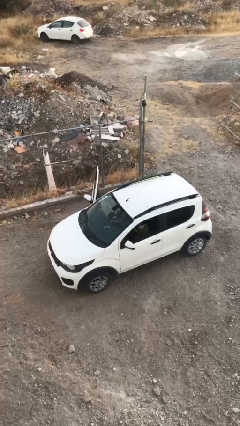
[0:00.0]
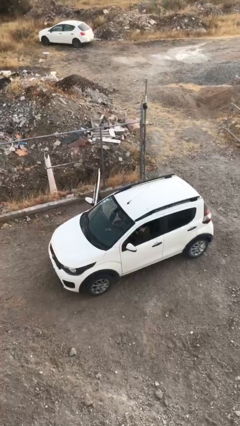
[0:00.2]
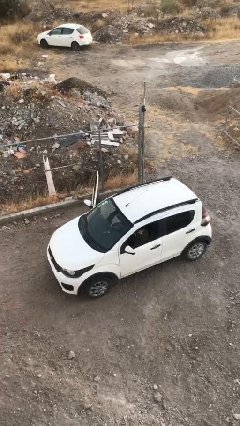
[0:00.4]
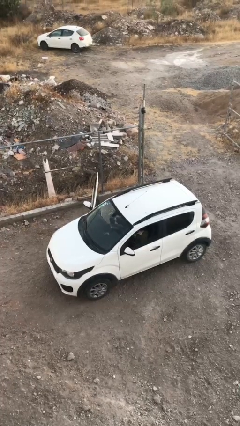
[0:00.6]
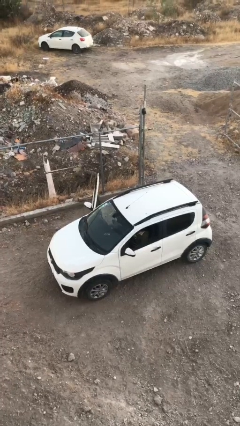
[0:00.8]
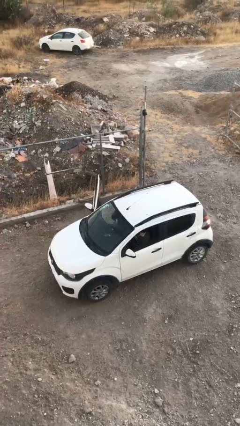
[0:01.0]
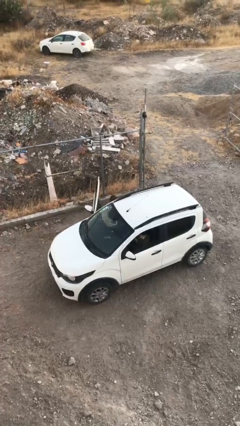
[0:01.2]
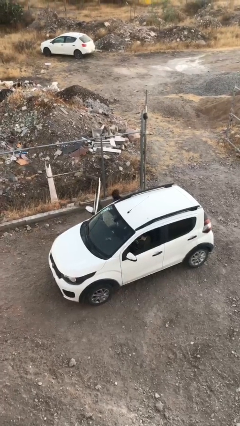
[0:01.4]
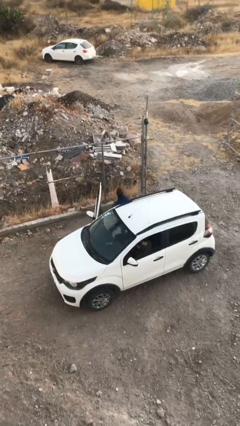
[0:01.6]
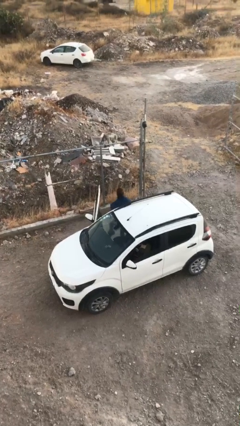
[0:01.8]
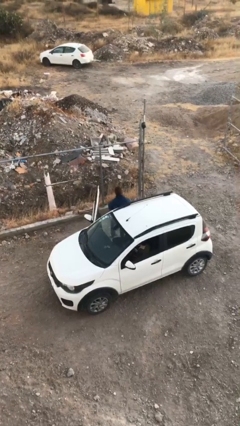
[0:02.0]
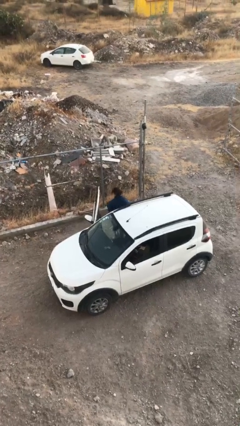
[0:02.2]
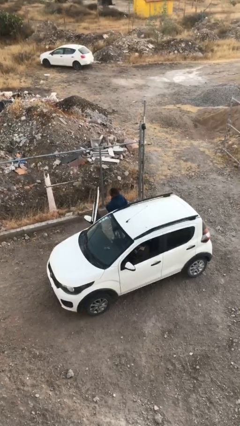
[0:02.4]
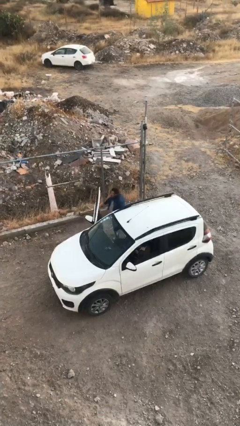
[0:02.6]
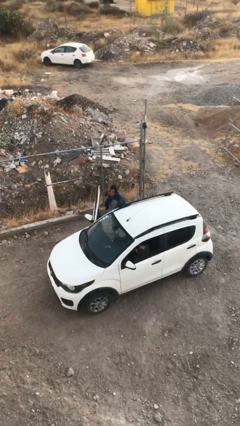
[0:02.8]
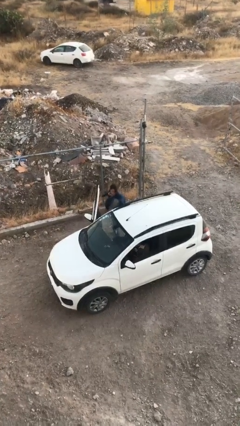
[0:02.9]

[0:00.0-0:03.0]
person exits car

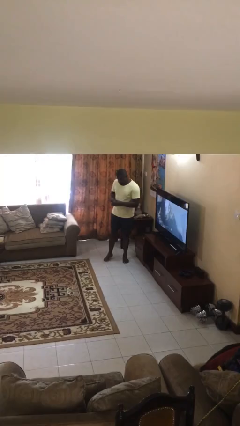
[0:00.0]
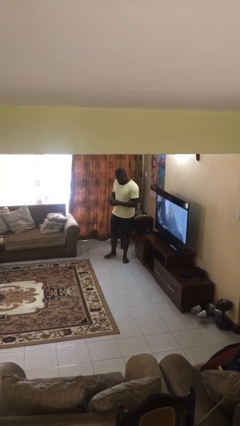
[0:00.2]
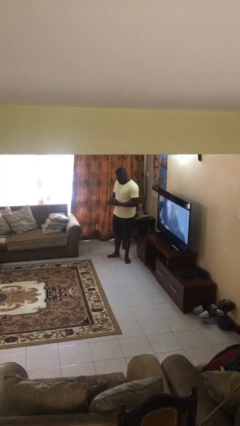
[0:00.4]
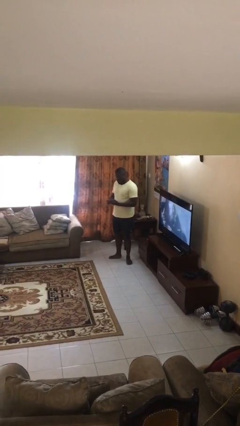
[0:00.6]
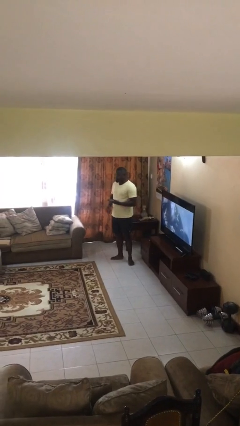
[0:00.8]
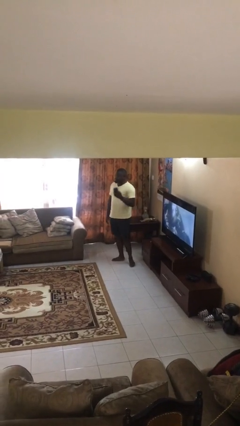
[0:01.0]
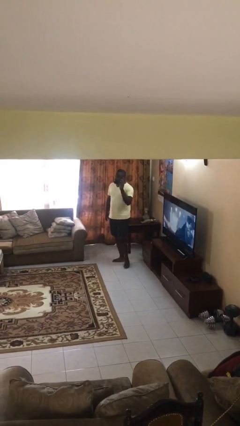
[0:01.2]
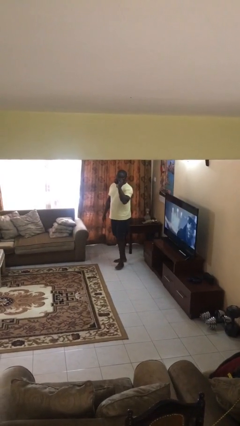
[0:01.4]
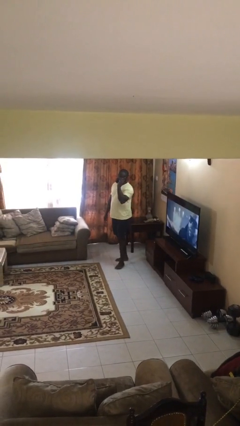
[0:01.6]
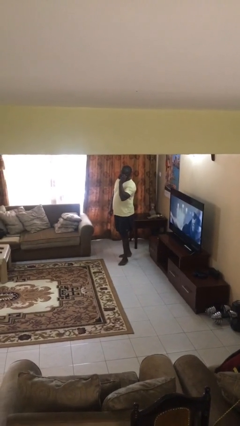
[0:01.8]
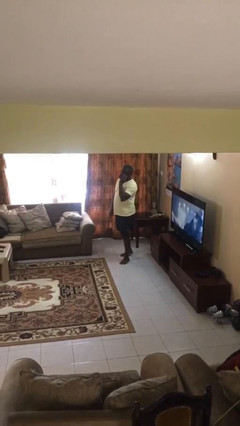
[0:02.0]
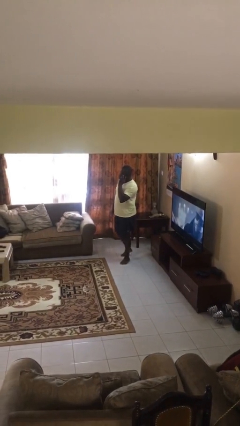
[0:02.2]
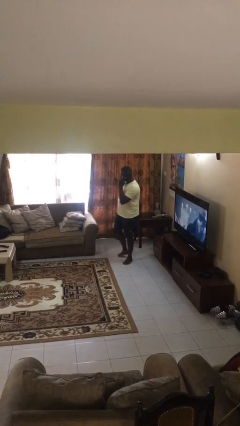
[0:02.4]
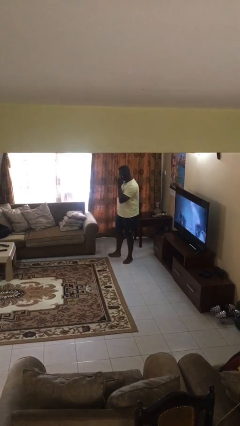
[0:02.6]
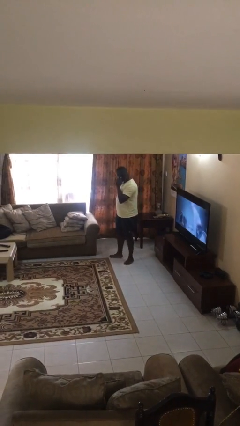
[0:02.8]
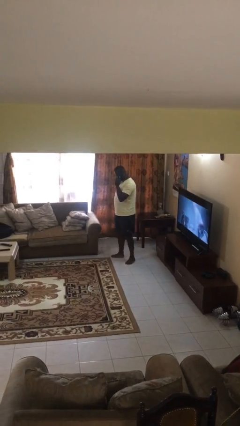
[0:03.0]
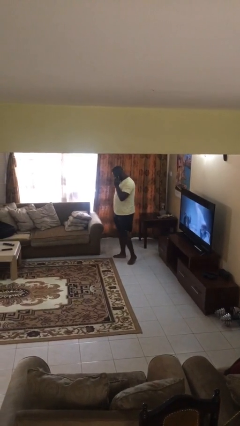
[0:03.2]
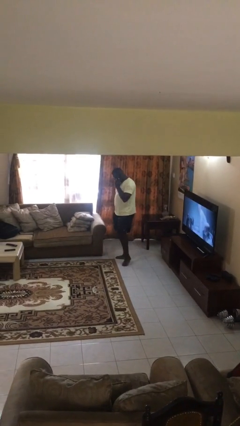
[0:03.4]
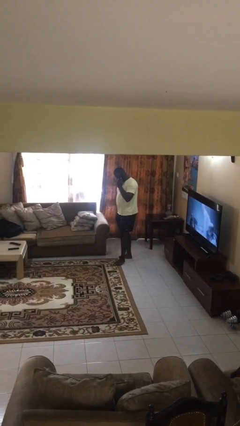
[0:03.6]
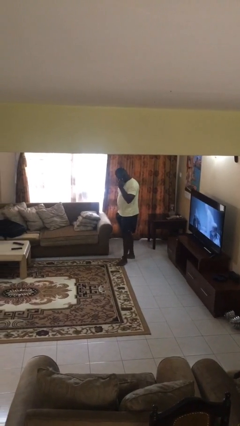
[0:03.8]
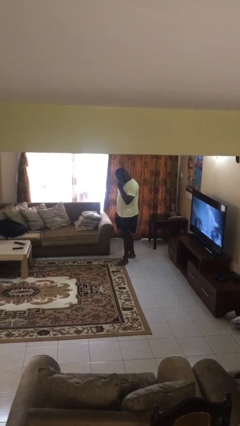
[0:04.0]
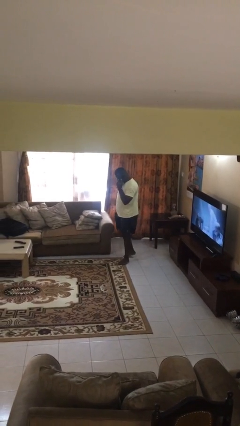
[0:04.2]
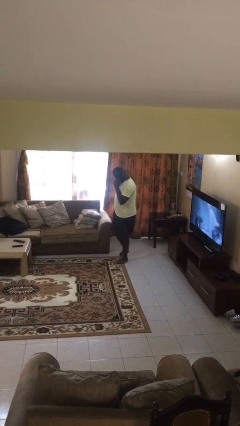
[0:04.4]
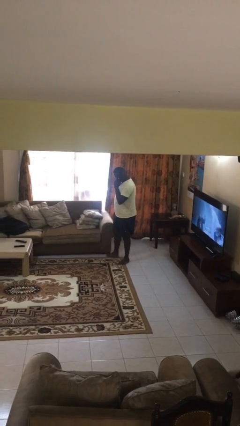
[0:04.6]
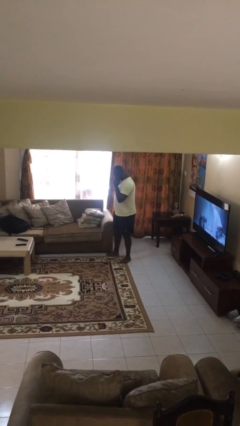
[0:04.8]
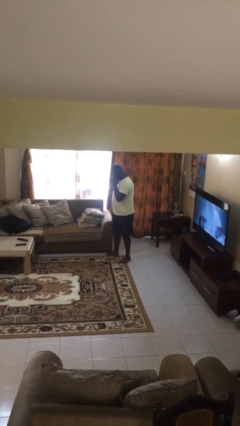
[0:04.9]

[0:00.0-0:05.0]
person talks on phone

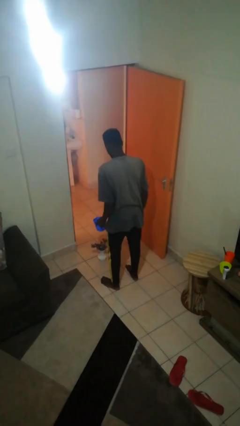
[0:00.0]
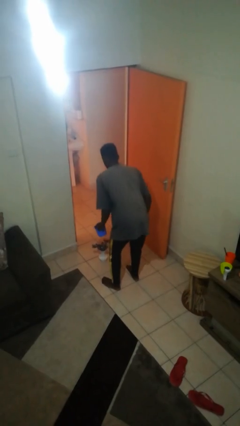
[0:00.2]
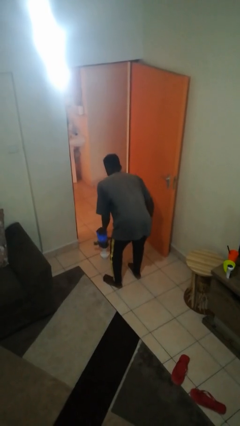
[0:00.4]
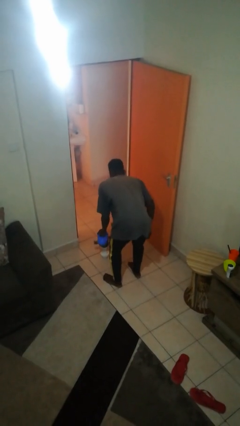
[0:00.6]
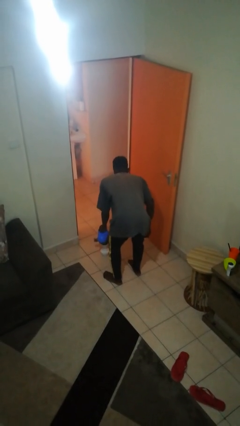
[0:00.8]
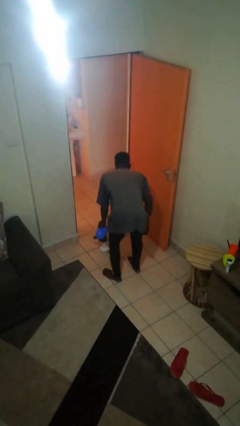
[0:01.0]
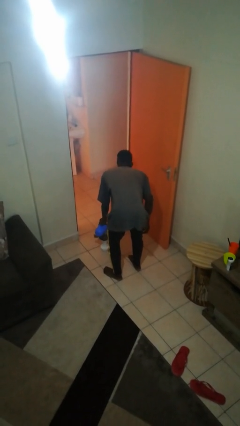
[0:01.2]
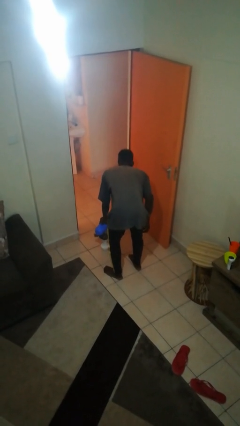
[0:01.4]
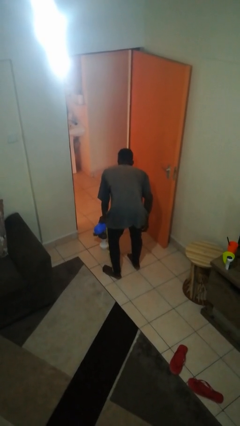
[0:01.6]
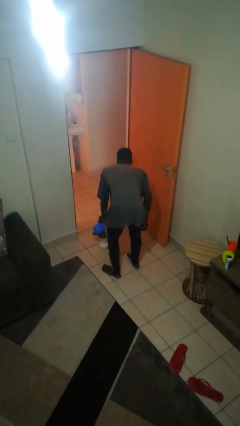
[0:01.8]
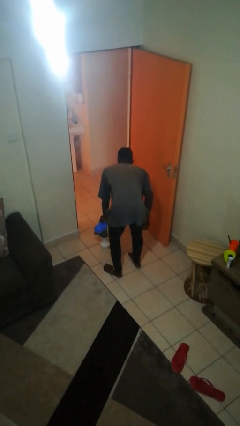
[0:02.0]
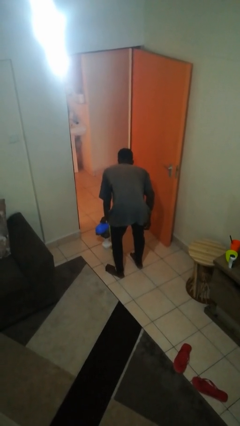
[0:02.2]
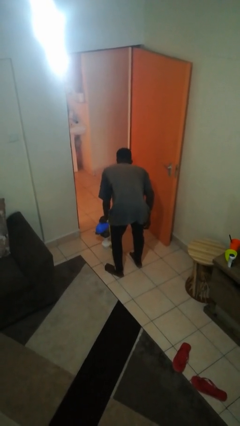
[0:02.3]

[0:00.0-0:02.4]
person waters houseplant

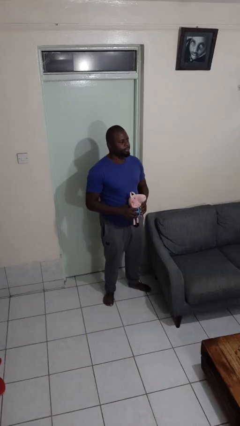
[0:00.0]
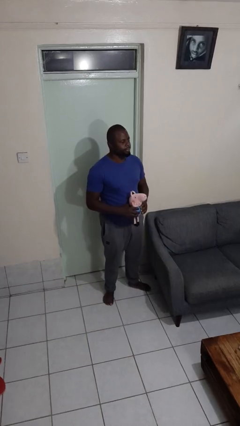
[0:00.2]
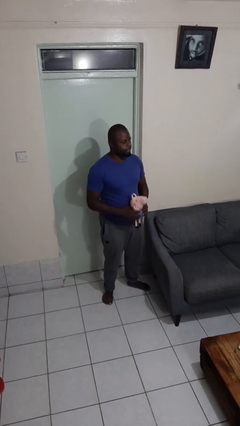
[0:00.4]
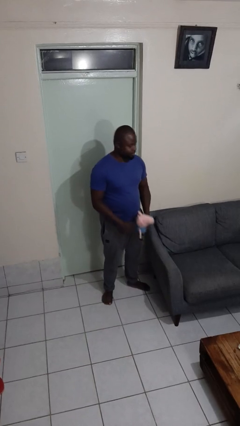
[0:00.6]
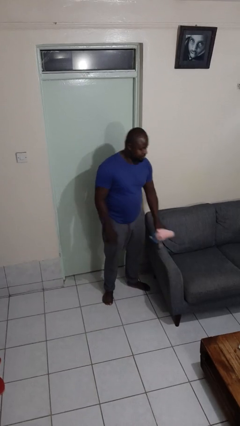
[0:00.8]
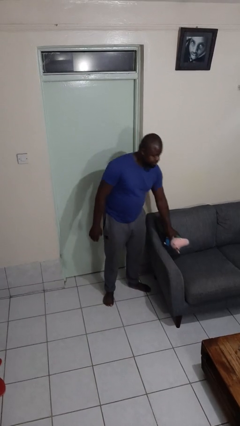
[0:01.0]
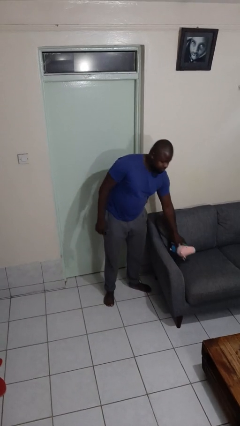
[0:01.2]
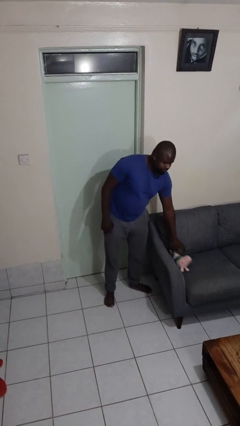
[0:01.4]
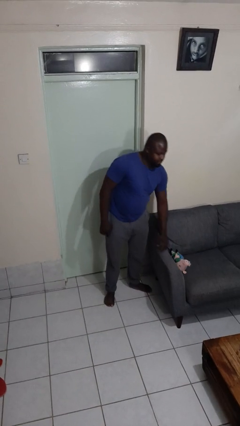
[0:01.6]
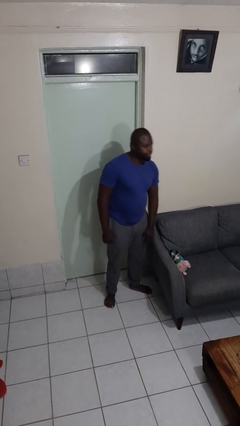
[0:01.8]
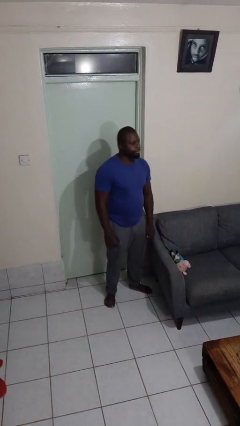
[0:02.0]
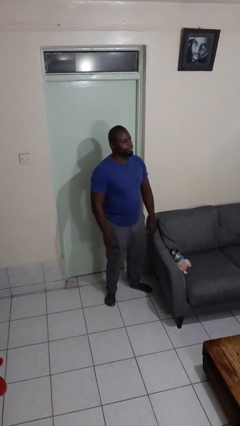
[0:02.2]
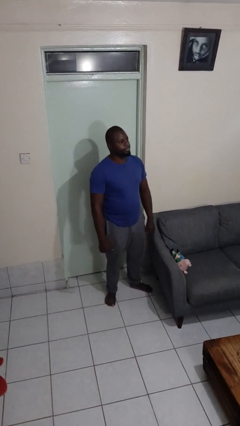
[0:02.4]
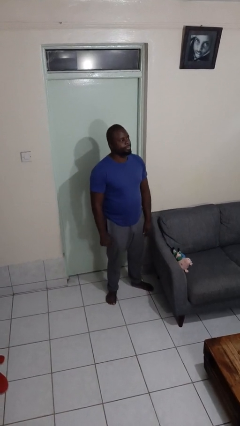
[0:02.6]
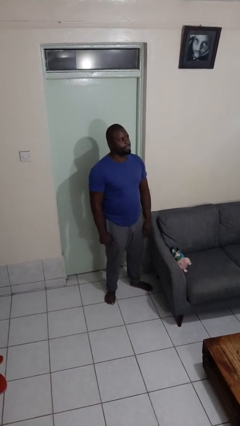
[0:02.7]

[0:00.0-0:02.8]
person puts down object on couch

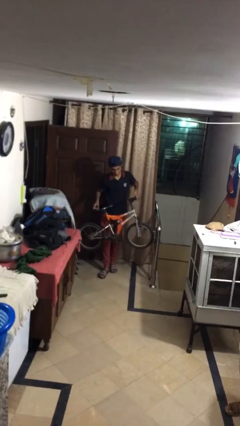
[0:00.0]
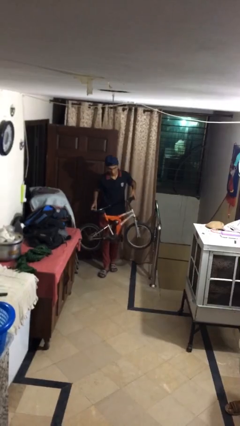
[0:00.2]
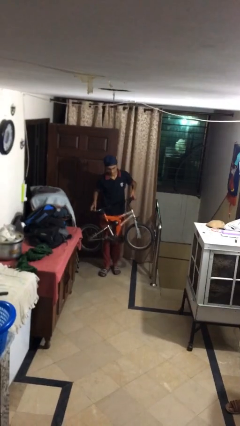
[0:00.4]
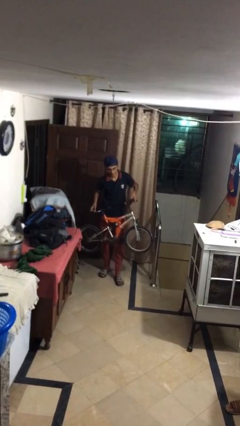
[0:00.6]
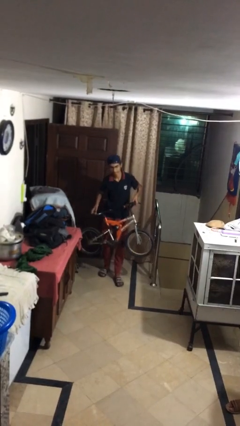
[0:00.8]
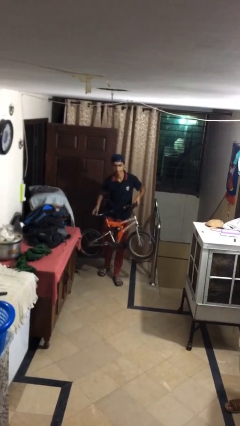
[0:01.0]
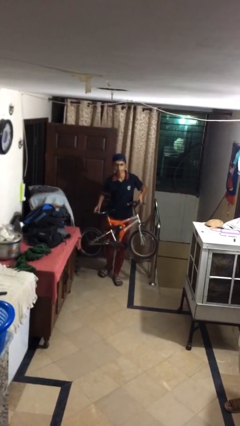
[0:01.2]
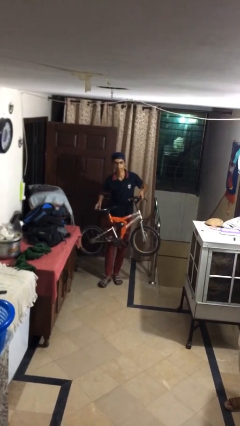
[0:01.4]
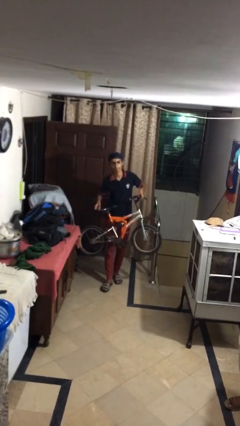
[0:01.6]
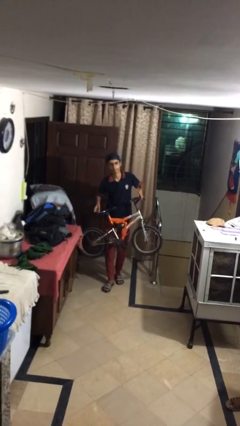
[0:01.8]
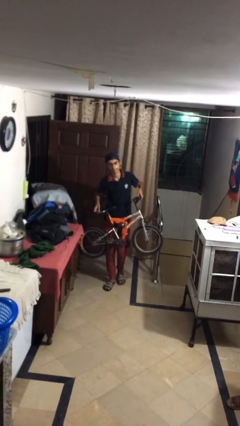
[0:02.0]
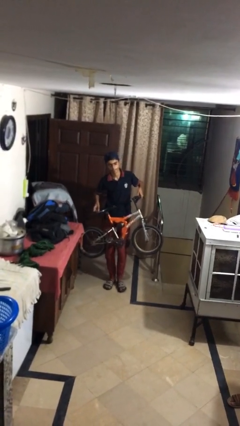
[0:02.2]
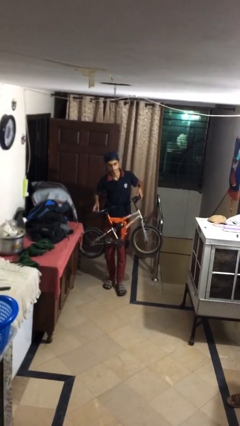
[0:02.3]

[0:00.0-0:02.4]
person carries heavy object

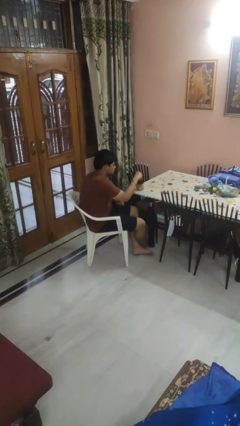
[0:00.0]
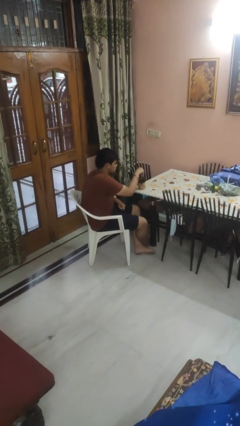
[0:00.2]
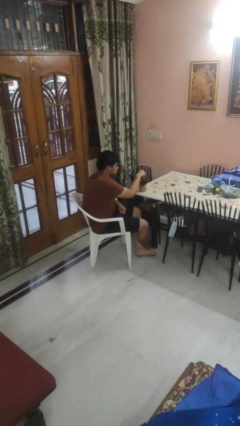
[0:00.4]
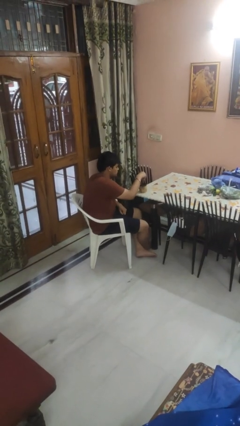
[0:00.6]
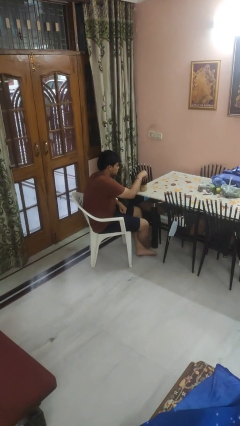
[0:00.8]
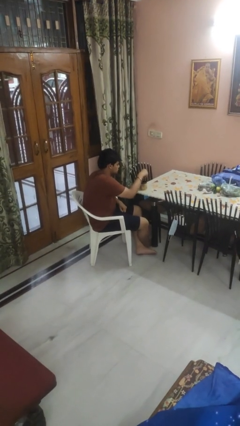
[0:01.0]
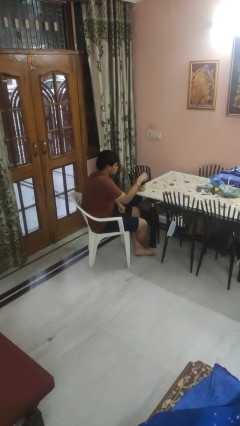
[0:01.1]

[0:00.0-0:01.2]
person stirs mug

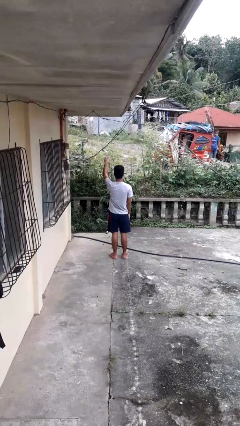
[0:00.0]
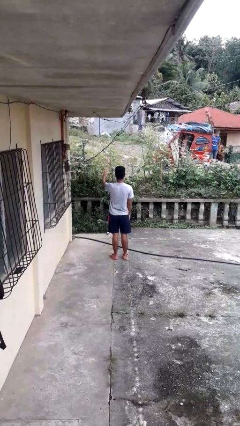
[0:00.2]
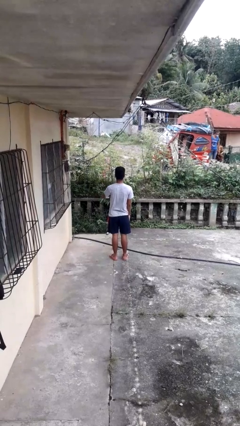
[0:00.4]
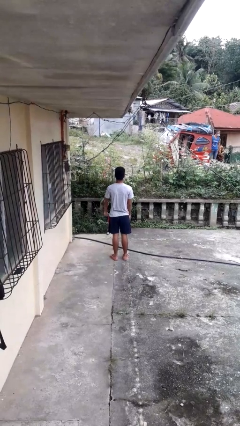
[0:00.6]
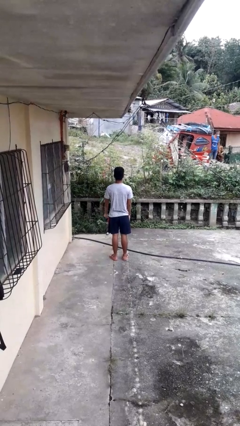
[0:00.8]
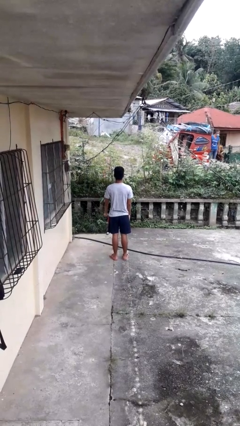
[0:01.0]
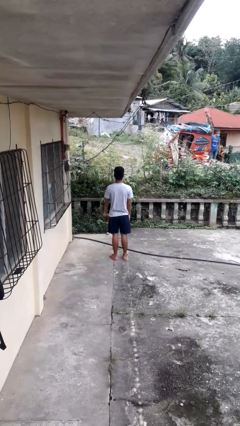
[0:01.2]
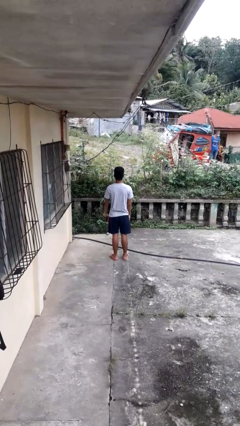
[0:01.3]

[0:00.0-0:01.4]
person gestures swipe down
